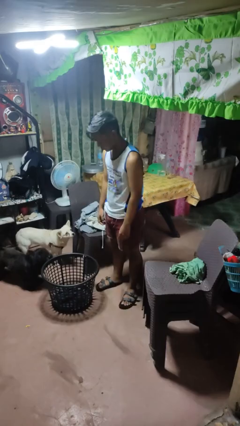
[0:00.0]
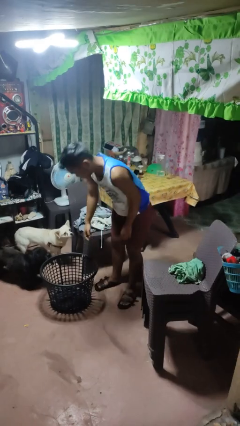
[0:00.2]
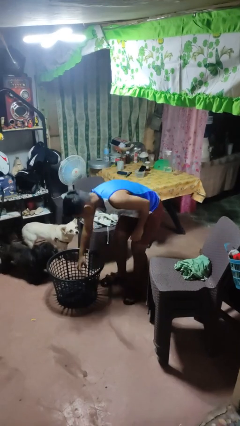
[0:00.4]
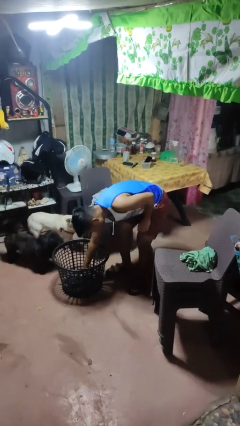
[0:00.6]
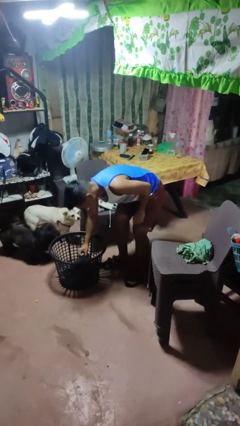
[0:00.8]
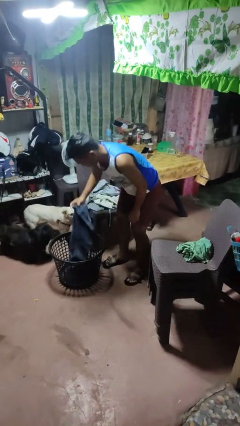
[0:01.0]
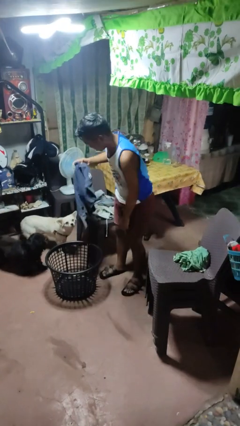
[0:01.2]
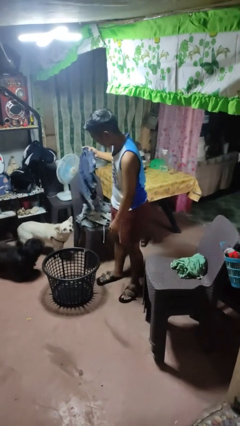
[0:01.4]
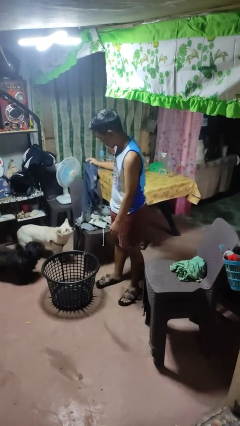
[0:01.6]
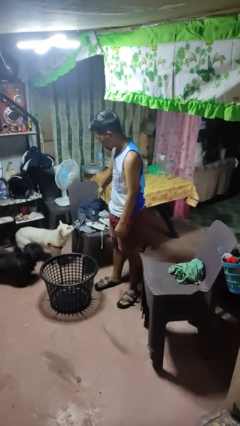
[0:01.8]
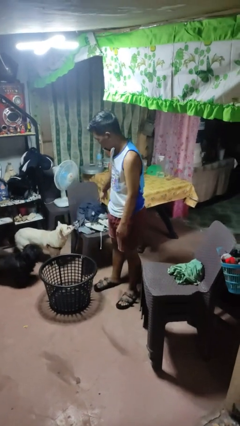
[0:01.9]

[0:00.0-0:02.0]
person takes object from basket

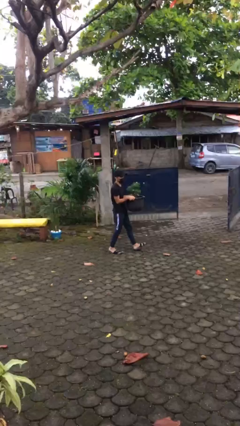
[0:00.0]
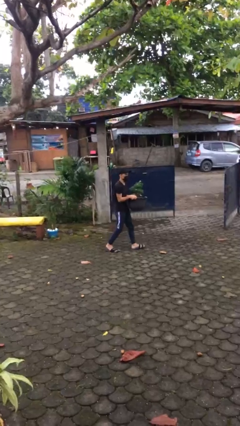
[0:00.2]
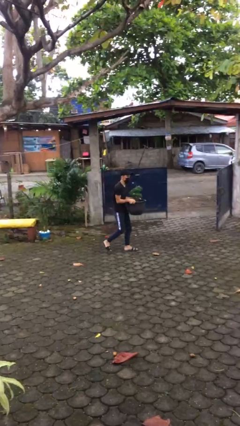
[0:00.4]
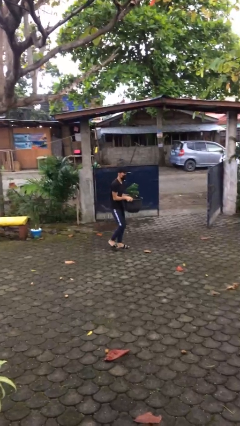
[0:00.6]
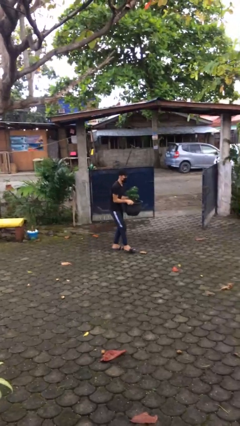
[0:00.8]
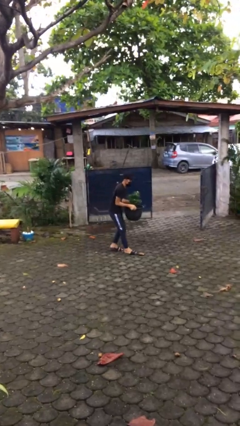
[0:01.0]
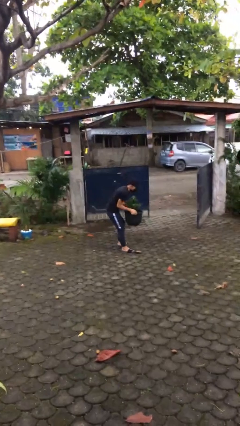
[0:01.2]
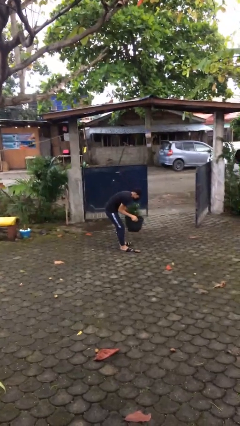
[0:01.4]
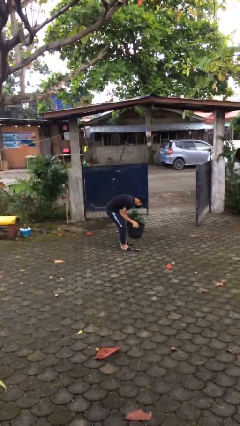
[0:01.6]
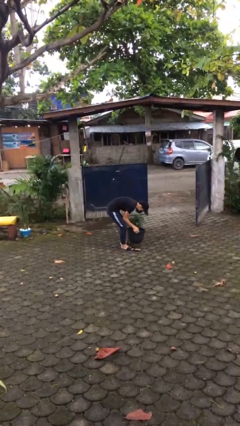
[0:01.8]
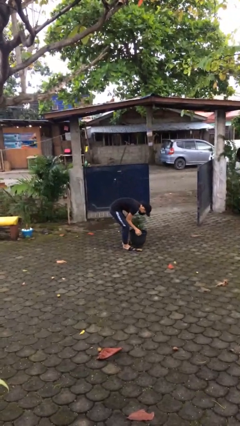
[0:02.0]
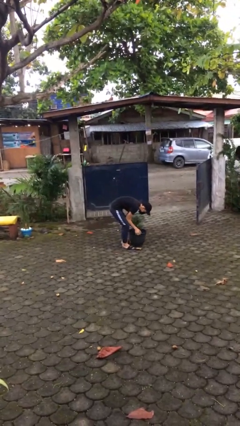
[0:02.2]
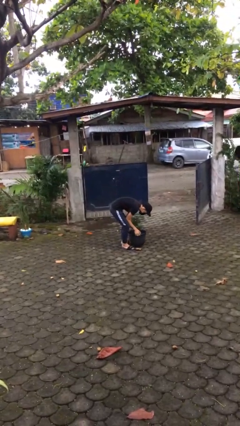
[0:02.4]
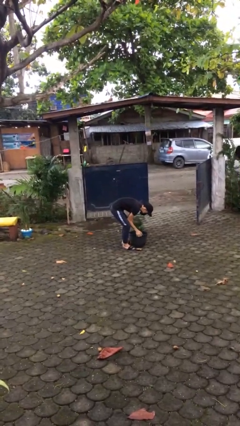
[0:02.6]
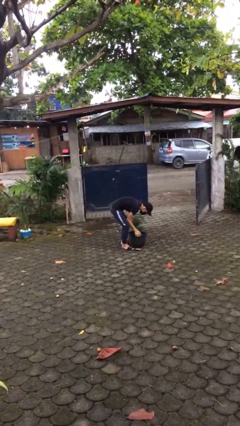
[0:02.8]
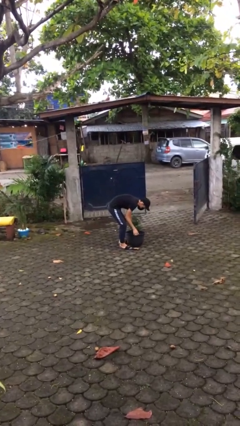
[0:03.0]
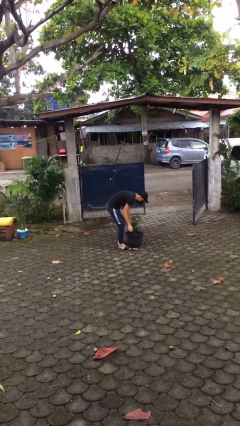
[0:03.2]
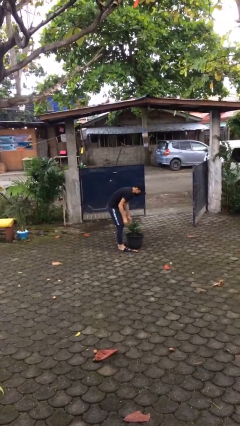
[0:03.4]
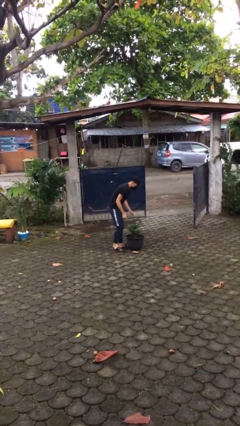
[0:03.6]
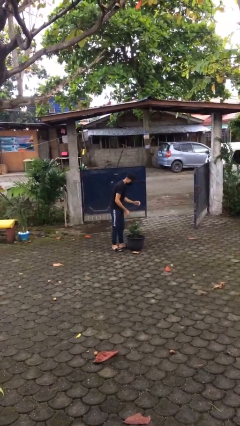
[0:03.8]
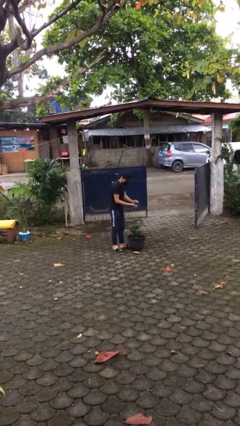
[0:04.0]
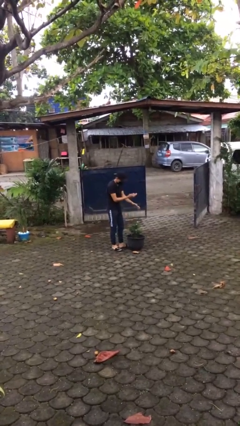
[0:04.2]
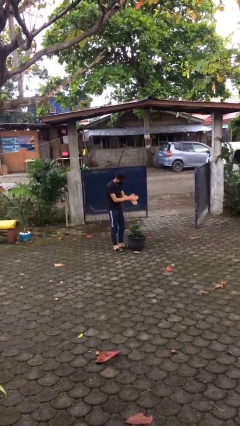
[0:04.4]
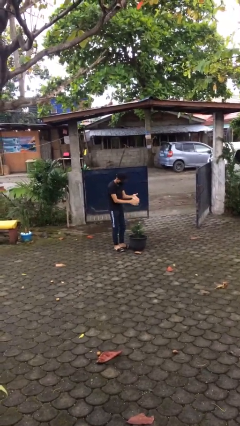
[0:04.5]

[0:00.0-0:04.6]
person puts down object on floor

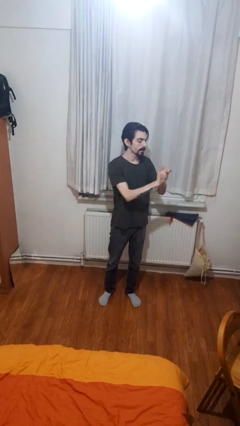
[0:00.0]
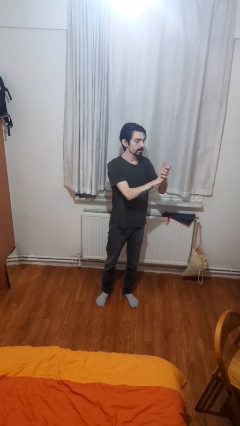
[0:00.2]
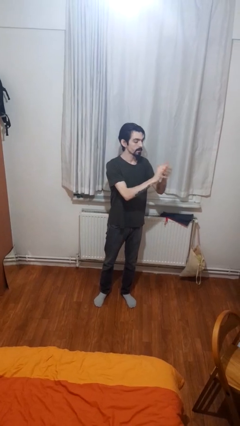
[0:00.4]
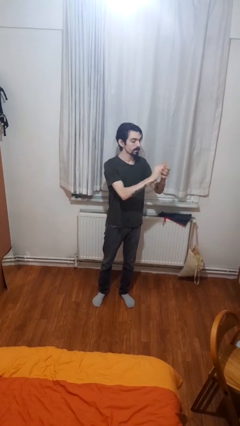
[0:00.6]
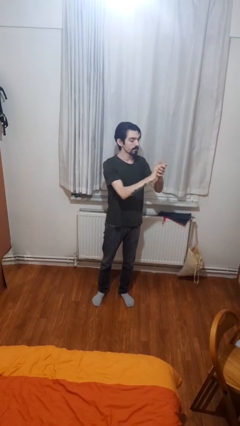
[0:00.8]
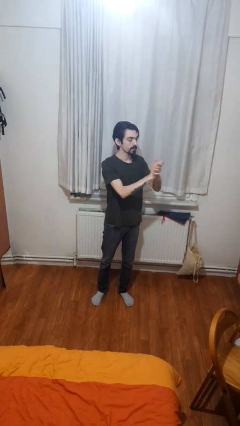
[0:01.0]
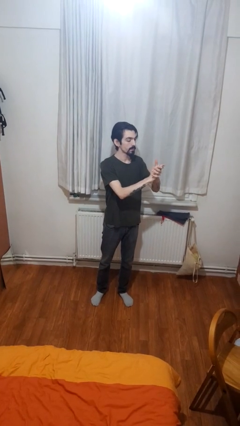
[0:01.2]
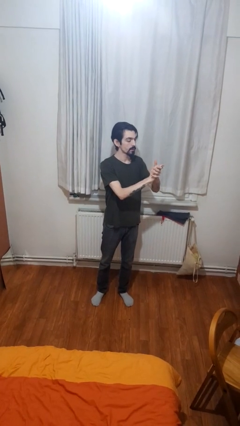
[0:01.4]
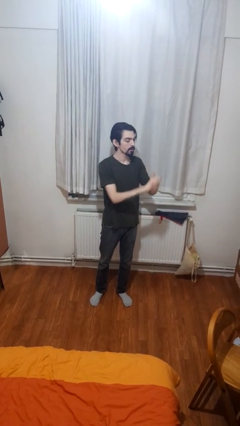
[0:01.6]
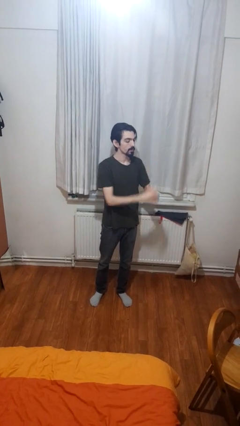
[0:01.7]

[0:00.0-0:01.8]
person claps hands

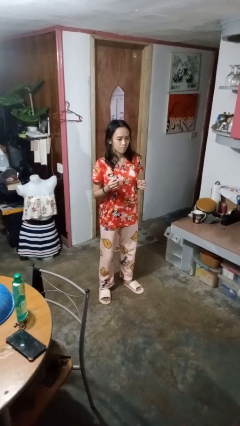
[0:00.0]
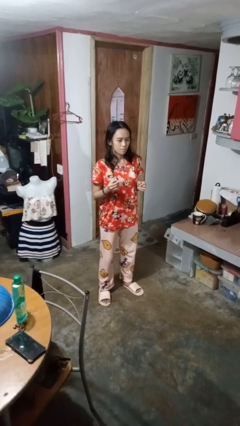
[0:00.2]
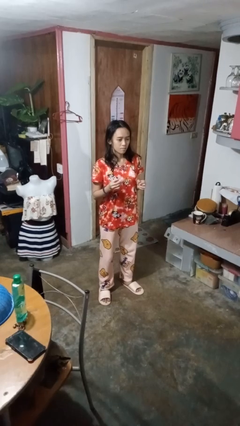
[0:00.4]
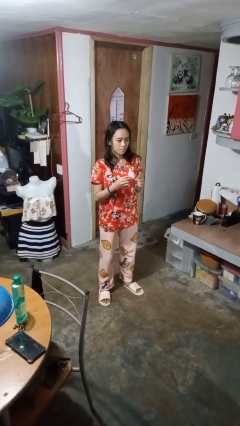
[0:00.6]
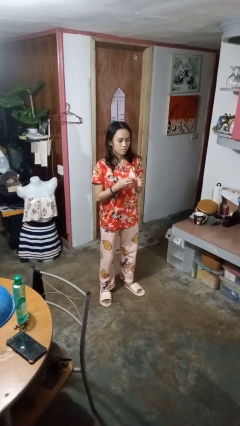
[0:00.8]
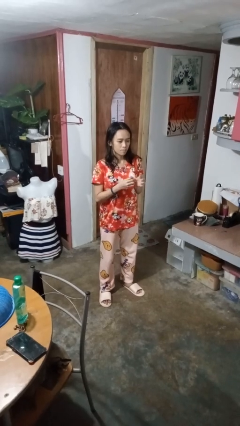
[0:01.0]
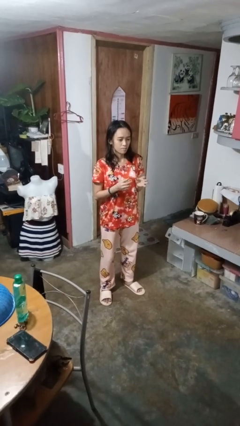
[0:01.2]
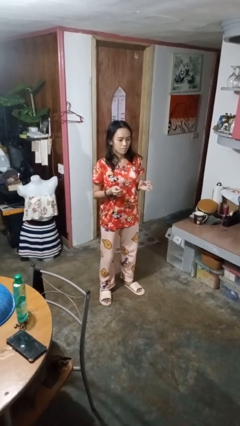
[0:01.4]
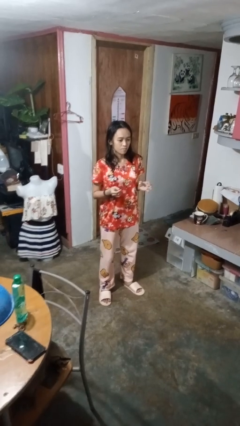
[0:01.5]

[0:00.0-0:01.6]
person puts on ring

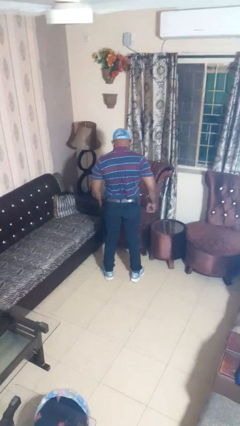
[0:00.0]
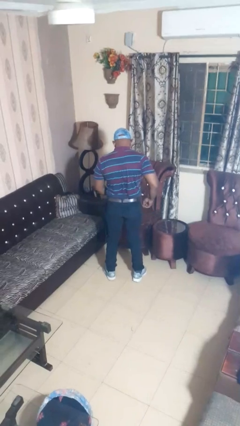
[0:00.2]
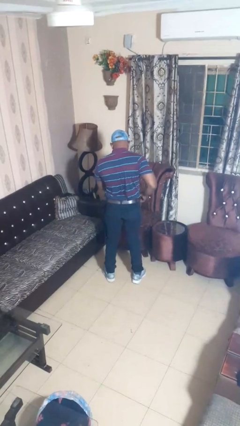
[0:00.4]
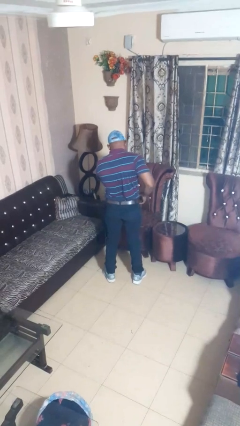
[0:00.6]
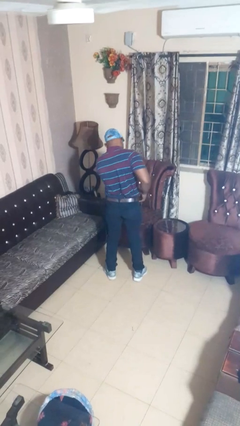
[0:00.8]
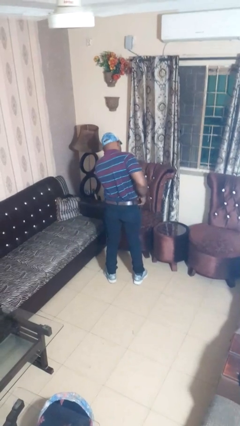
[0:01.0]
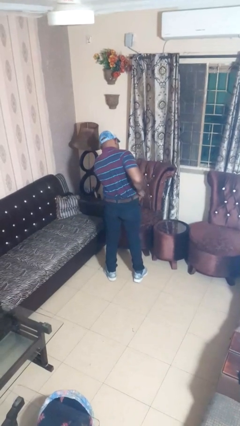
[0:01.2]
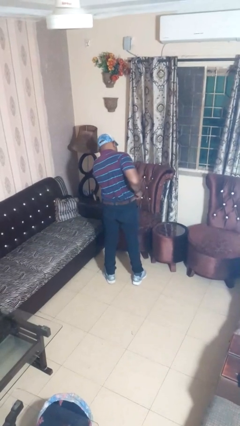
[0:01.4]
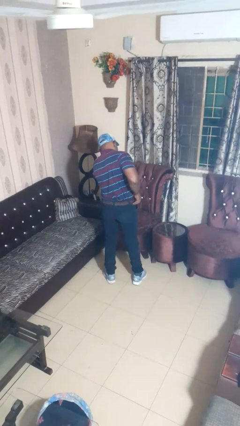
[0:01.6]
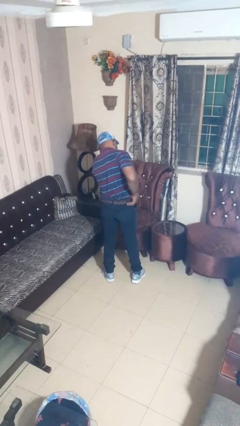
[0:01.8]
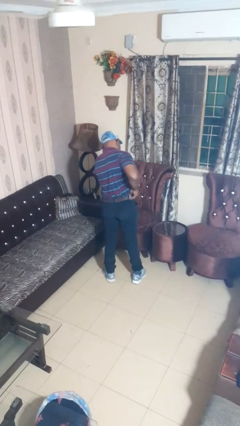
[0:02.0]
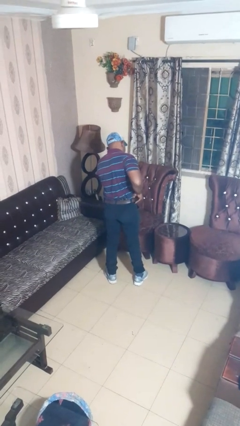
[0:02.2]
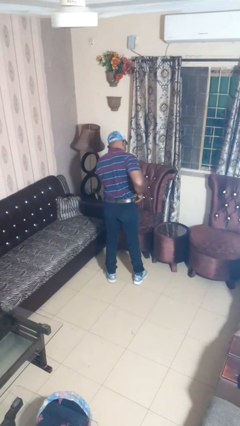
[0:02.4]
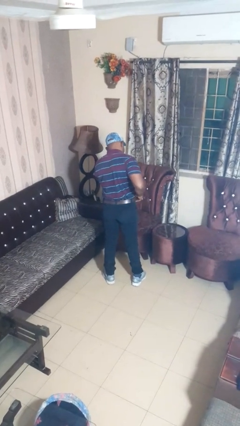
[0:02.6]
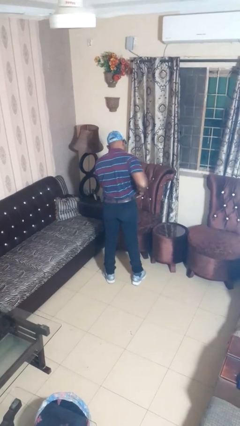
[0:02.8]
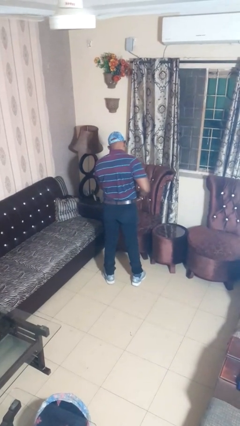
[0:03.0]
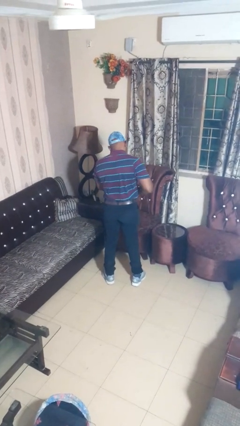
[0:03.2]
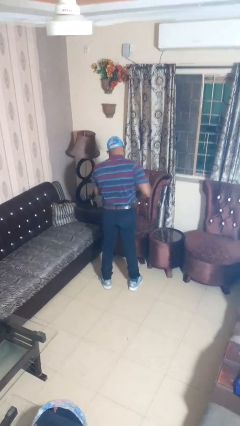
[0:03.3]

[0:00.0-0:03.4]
person hikes up pants

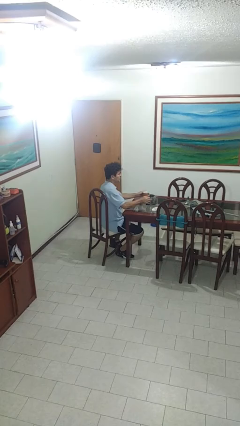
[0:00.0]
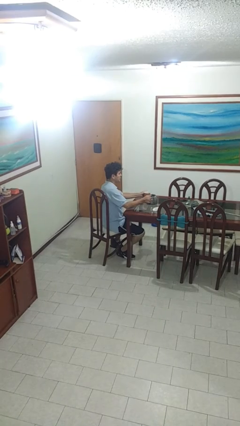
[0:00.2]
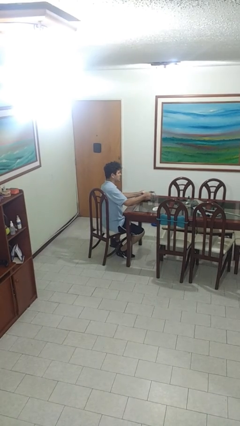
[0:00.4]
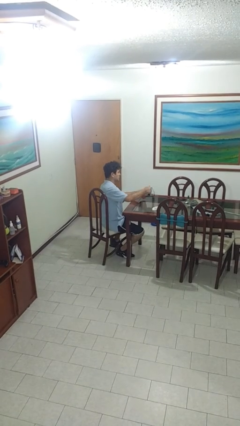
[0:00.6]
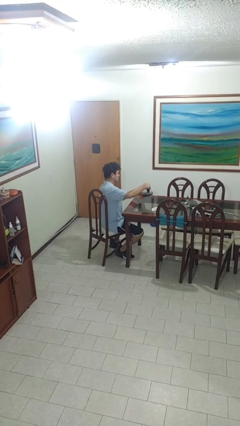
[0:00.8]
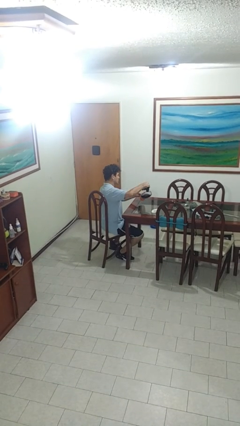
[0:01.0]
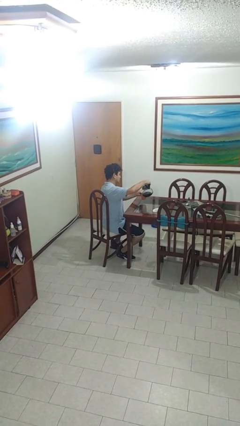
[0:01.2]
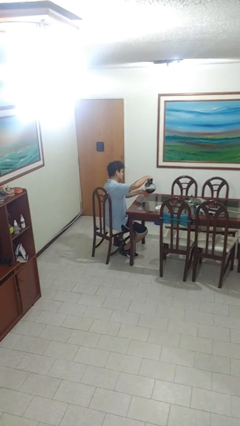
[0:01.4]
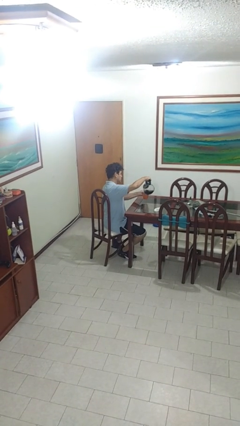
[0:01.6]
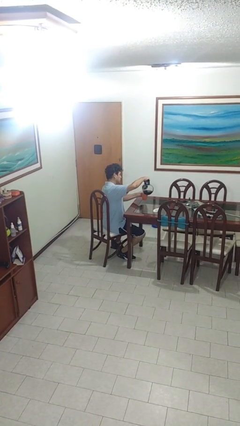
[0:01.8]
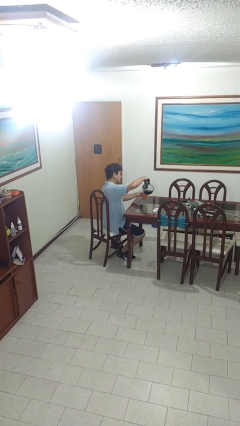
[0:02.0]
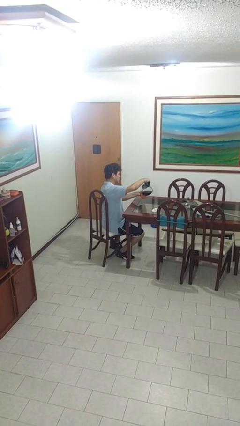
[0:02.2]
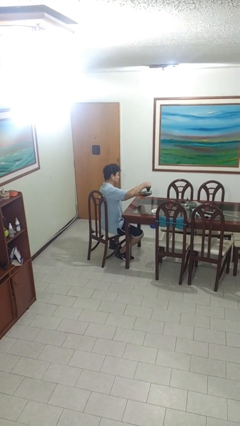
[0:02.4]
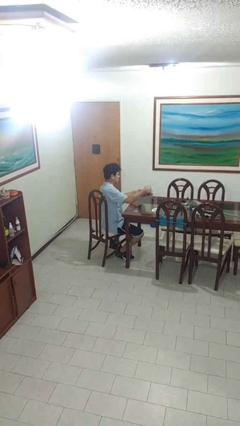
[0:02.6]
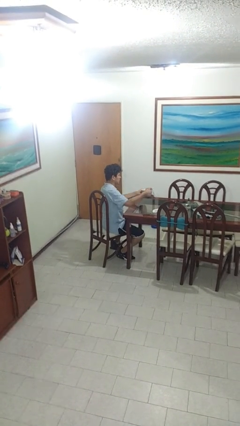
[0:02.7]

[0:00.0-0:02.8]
person pours coffee into mug

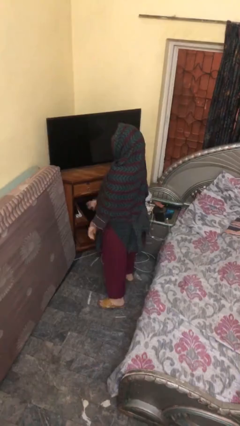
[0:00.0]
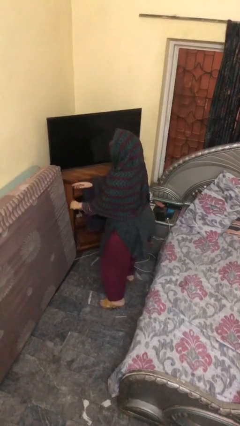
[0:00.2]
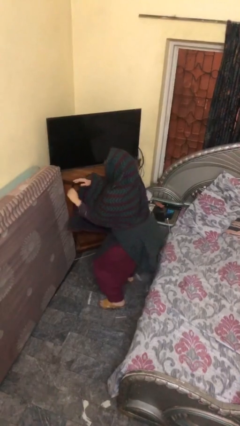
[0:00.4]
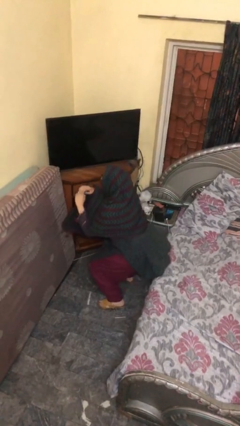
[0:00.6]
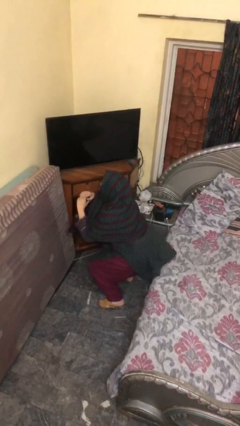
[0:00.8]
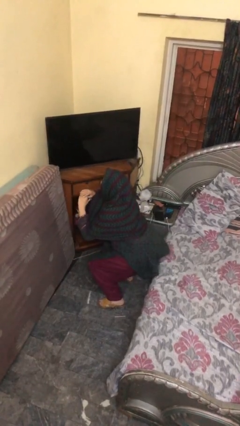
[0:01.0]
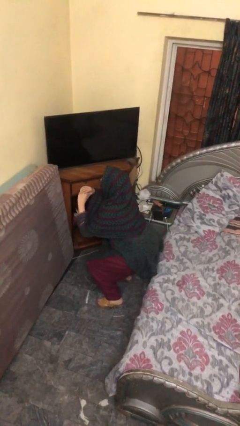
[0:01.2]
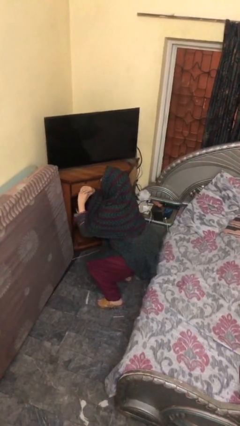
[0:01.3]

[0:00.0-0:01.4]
person squats
